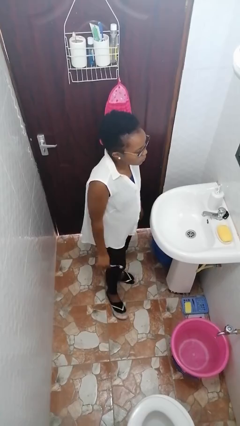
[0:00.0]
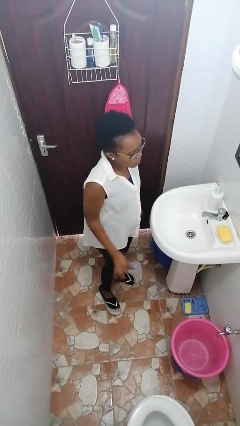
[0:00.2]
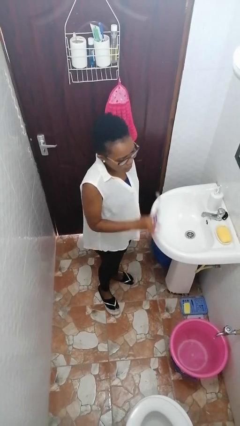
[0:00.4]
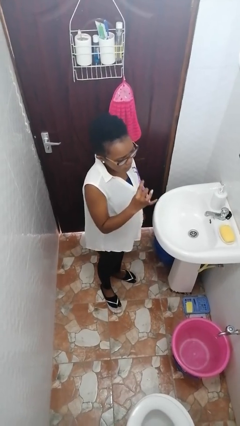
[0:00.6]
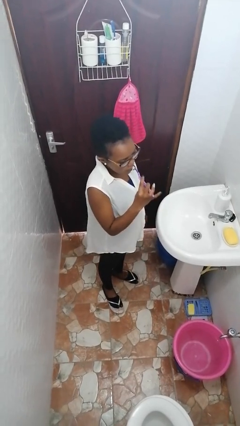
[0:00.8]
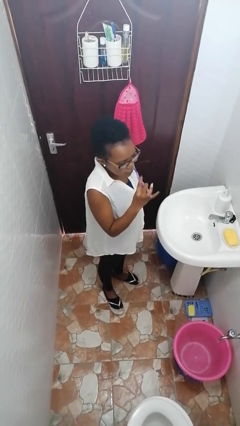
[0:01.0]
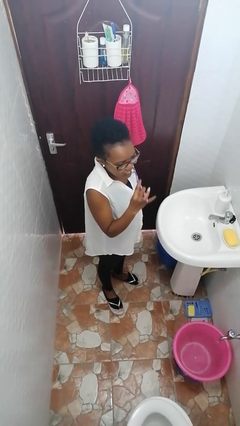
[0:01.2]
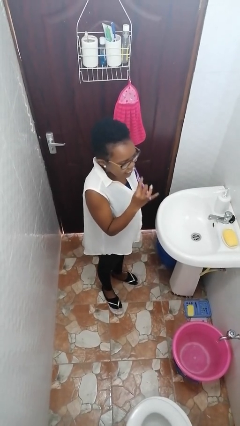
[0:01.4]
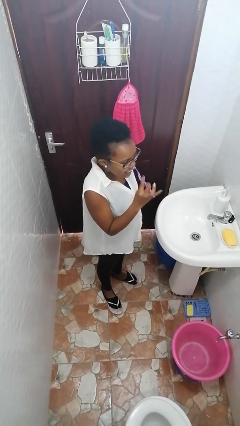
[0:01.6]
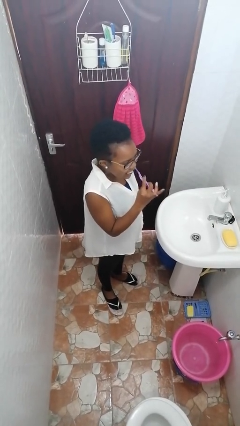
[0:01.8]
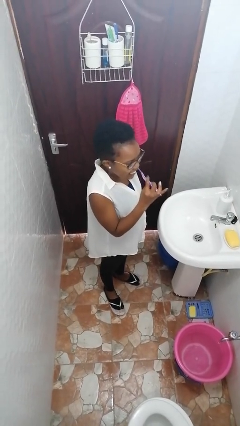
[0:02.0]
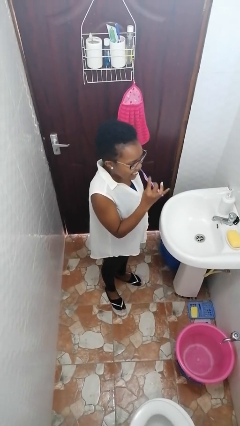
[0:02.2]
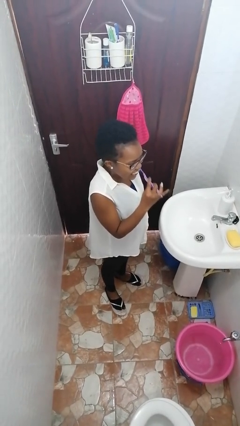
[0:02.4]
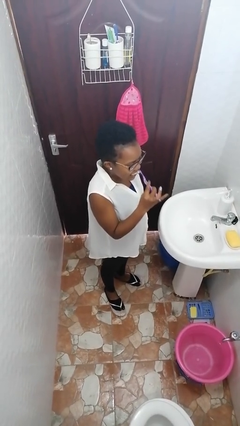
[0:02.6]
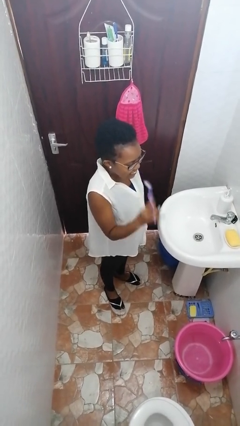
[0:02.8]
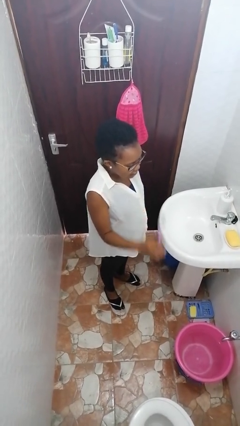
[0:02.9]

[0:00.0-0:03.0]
person brushes teeth

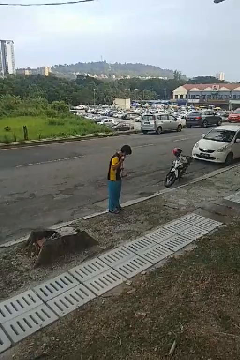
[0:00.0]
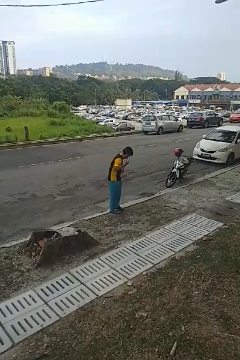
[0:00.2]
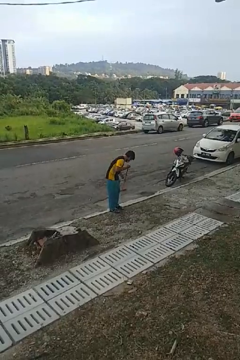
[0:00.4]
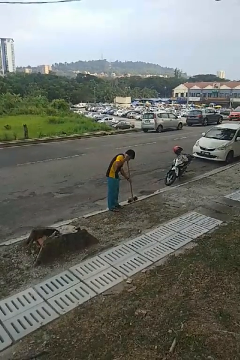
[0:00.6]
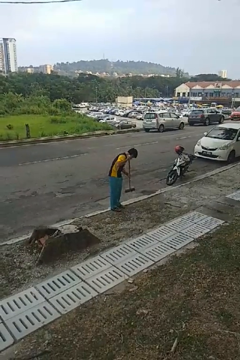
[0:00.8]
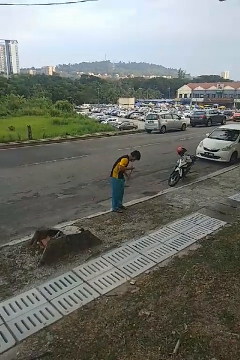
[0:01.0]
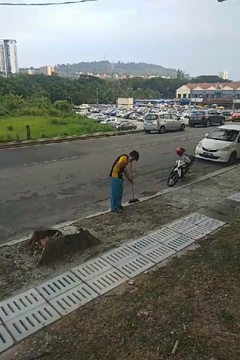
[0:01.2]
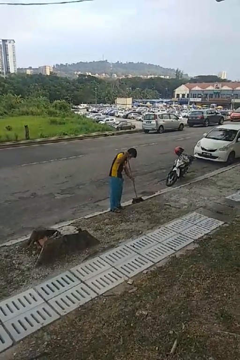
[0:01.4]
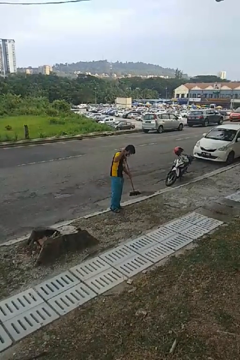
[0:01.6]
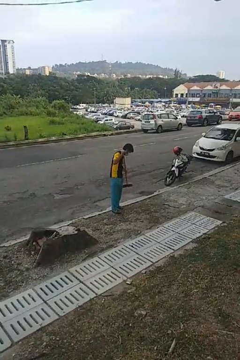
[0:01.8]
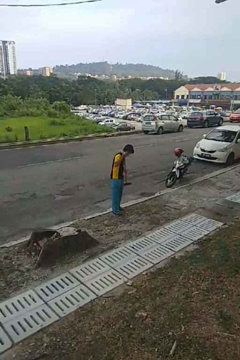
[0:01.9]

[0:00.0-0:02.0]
person sweeps floor

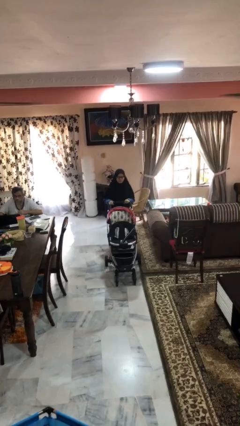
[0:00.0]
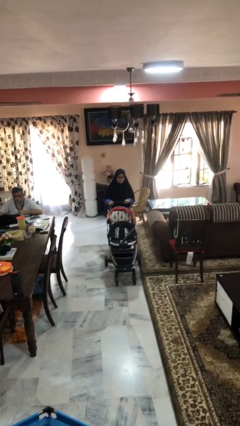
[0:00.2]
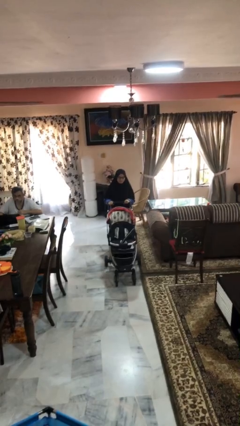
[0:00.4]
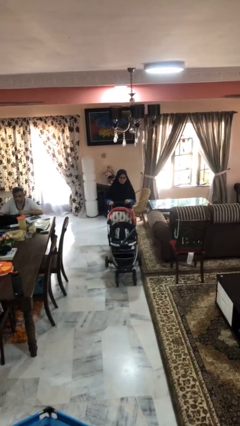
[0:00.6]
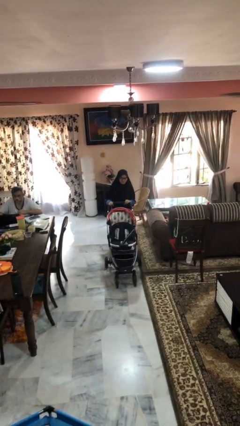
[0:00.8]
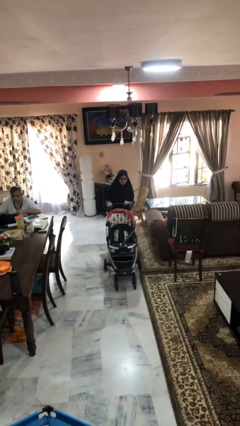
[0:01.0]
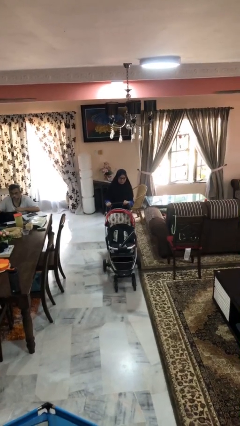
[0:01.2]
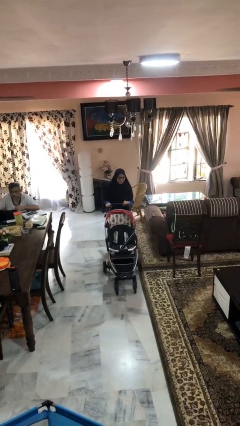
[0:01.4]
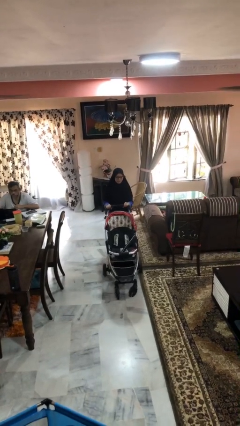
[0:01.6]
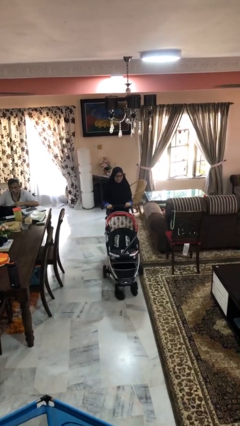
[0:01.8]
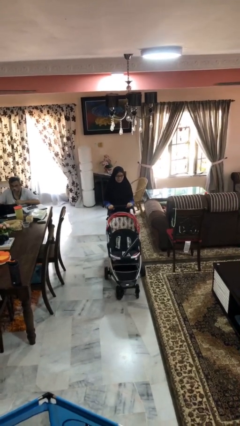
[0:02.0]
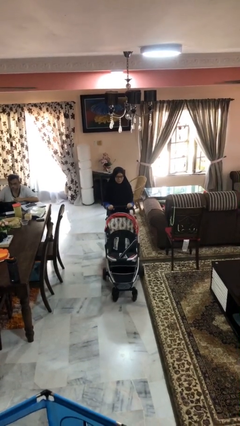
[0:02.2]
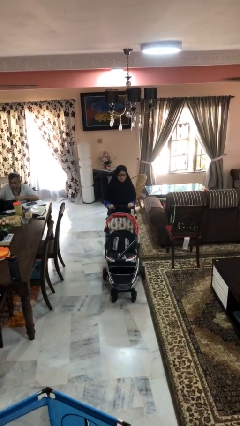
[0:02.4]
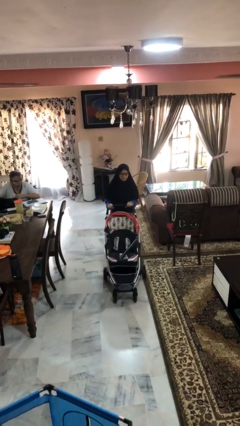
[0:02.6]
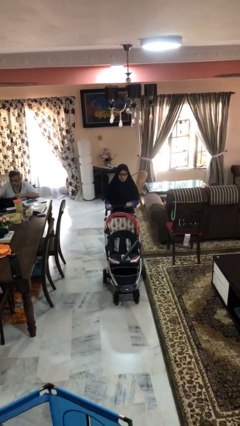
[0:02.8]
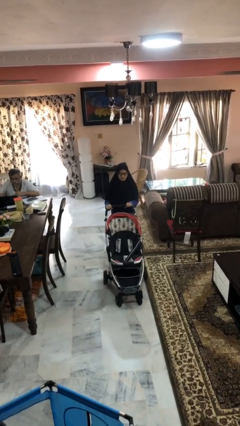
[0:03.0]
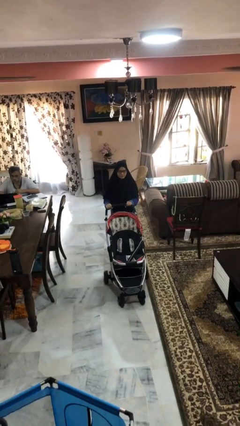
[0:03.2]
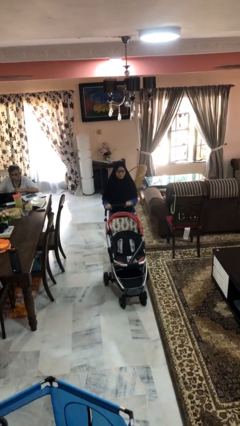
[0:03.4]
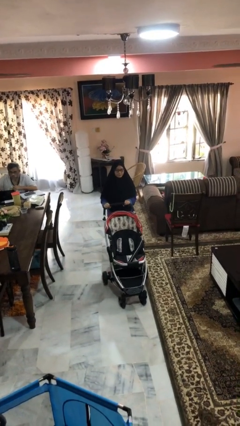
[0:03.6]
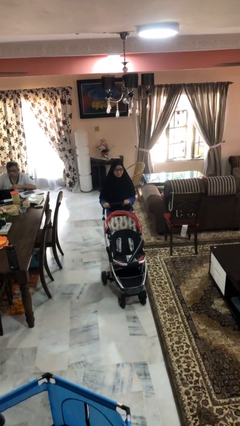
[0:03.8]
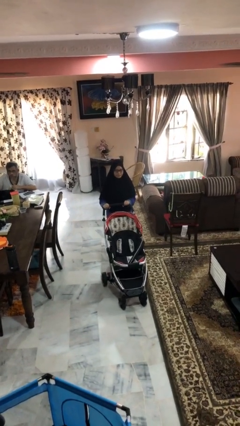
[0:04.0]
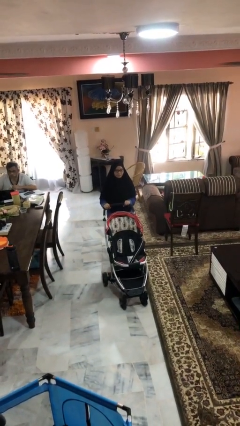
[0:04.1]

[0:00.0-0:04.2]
person pushes wheeled cart

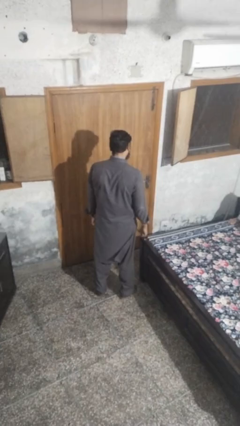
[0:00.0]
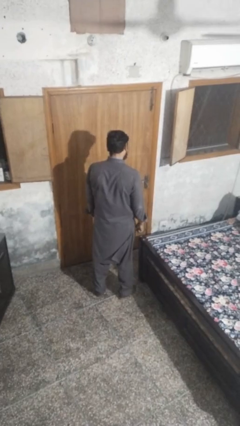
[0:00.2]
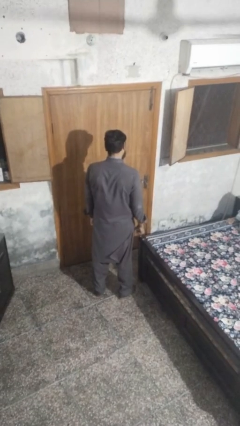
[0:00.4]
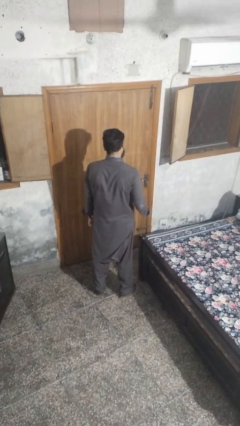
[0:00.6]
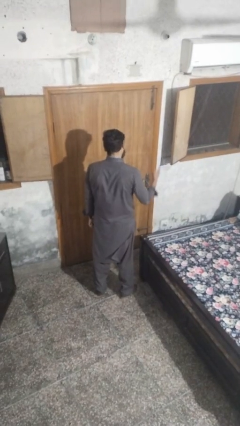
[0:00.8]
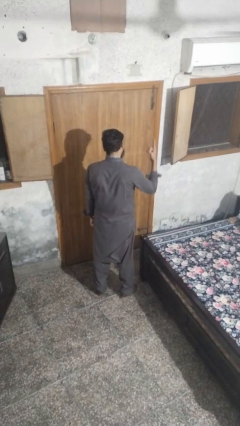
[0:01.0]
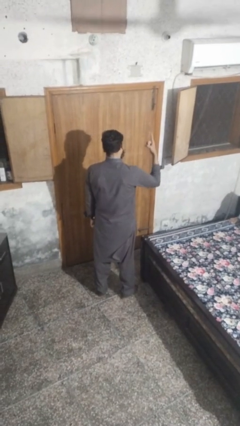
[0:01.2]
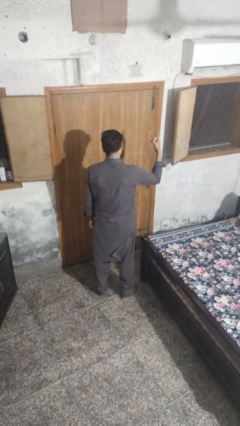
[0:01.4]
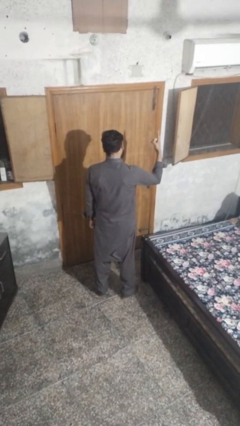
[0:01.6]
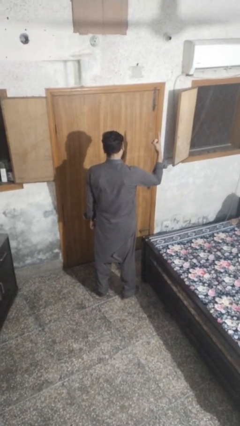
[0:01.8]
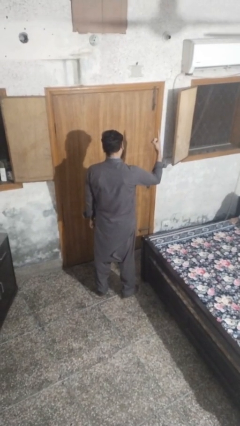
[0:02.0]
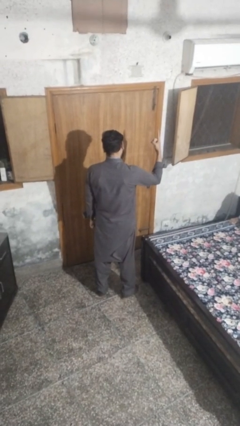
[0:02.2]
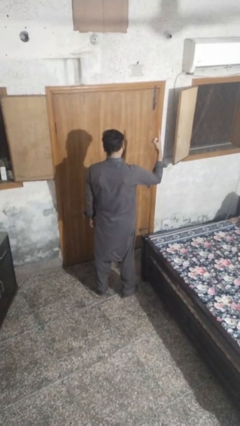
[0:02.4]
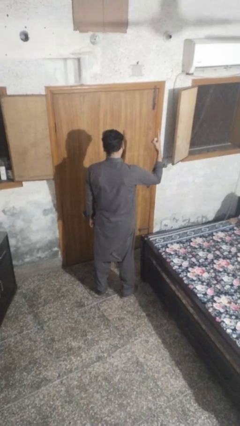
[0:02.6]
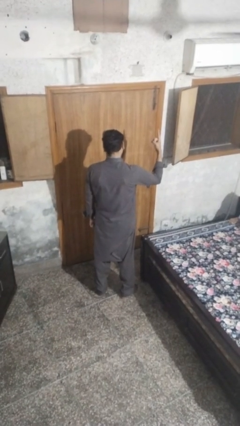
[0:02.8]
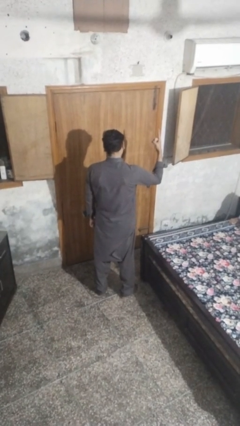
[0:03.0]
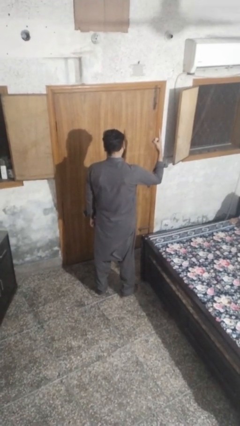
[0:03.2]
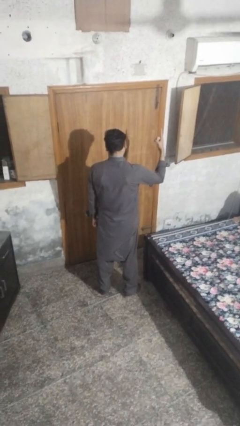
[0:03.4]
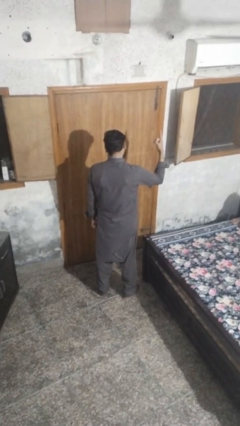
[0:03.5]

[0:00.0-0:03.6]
person gestures number one

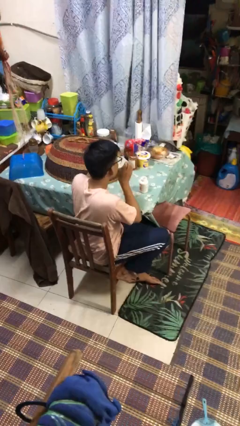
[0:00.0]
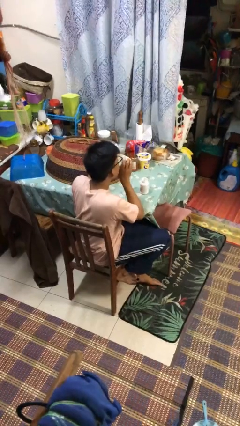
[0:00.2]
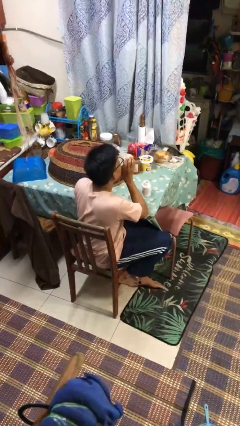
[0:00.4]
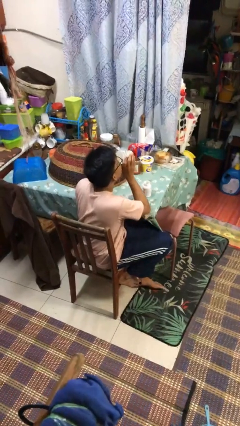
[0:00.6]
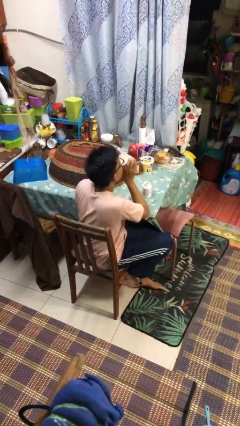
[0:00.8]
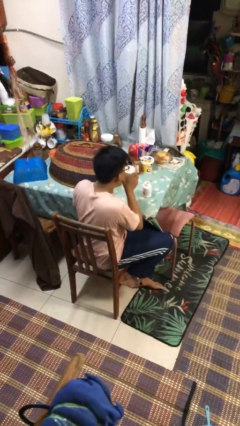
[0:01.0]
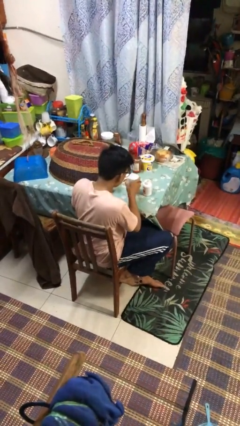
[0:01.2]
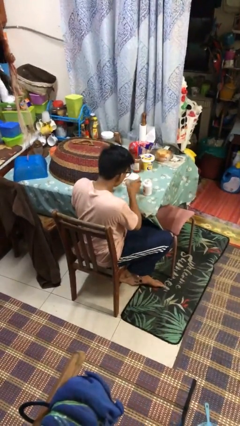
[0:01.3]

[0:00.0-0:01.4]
person drinks from cup

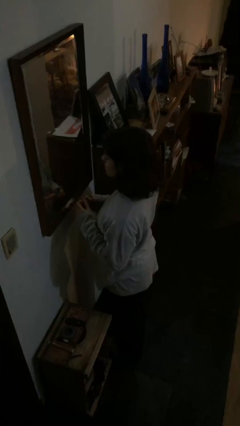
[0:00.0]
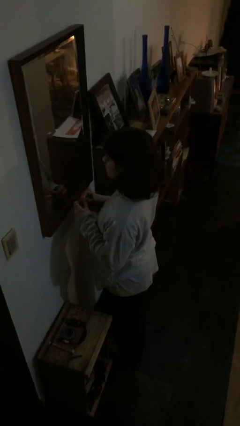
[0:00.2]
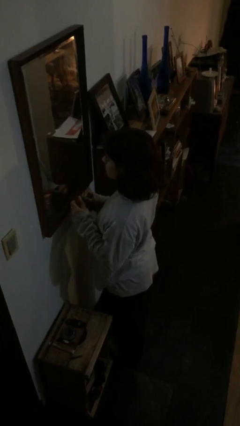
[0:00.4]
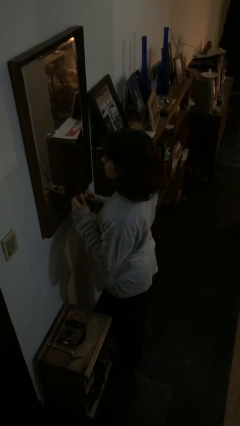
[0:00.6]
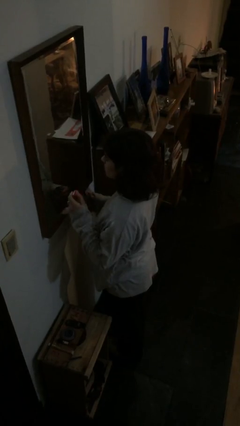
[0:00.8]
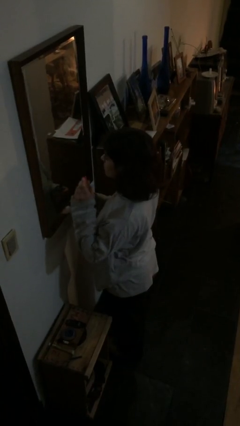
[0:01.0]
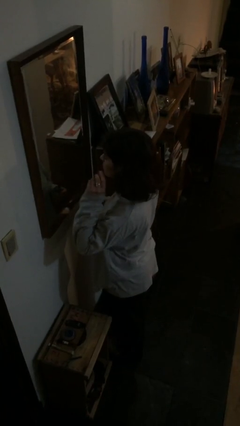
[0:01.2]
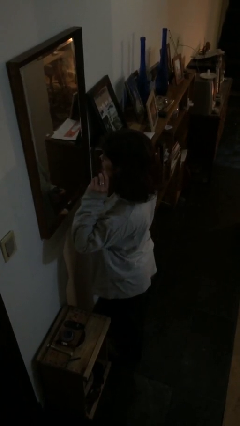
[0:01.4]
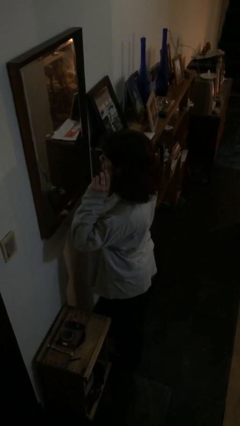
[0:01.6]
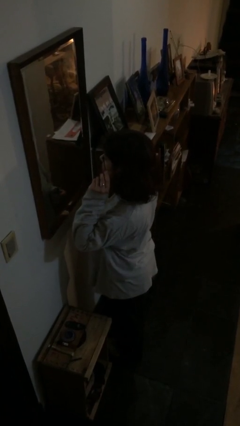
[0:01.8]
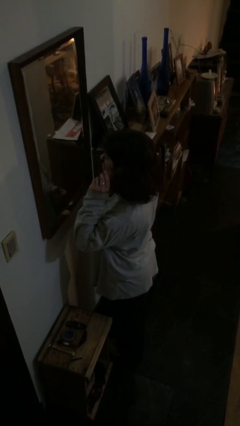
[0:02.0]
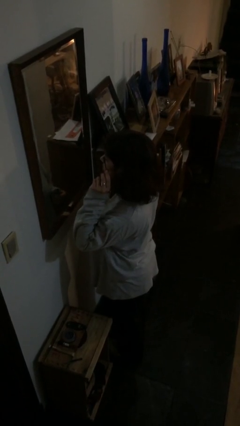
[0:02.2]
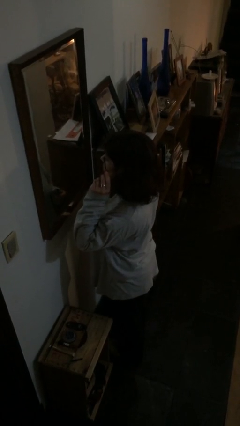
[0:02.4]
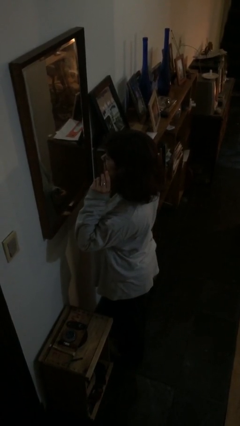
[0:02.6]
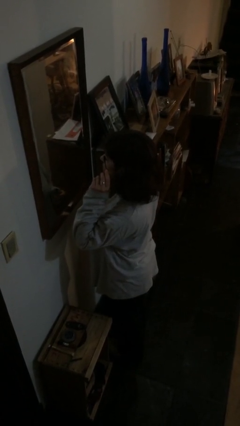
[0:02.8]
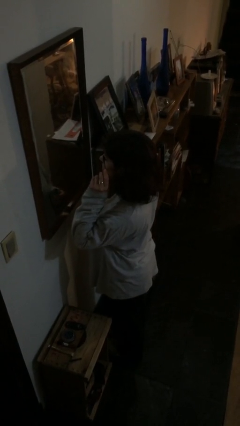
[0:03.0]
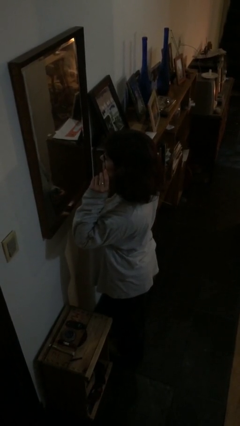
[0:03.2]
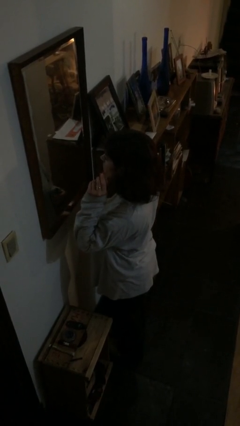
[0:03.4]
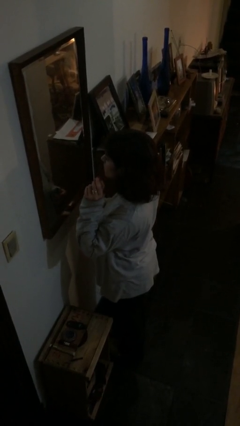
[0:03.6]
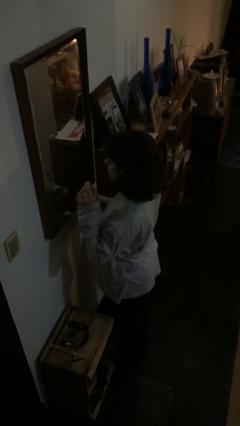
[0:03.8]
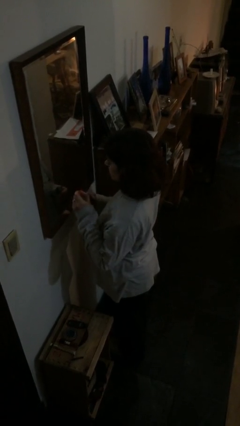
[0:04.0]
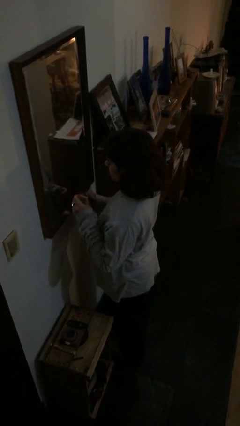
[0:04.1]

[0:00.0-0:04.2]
person applies eye makeup
